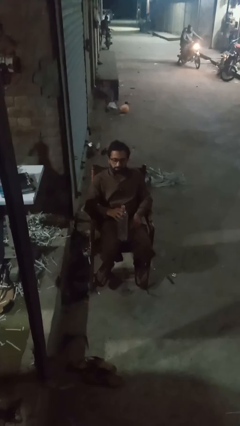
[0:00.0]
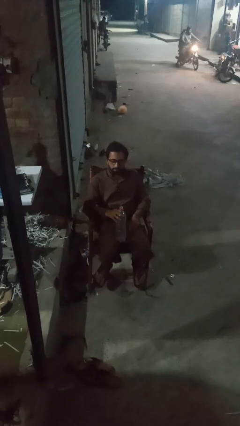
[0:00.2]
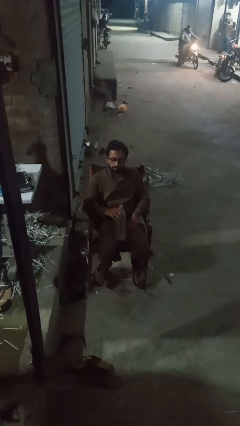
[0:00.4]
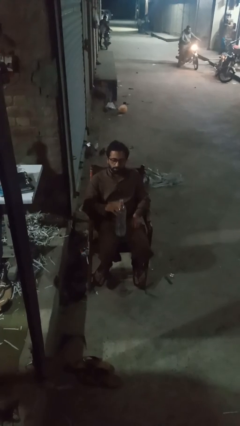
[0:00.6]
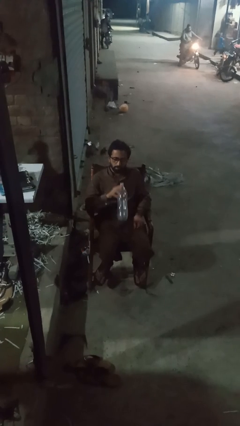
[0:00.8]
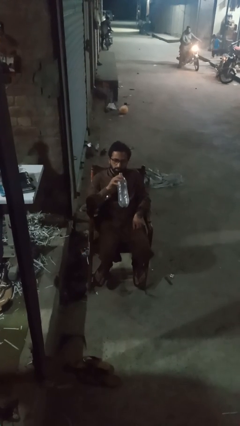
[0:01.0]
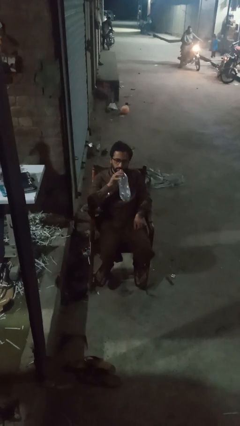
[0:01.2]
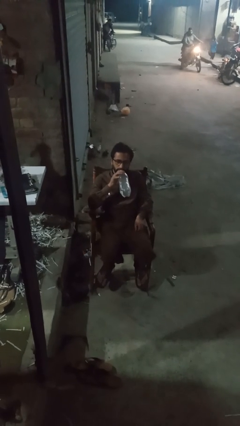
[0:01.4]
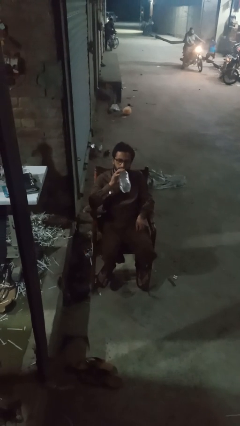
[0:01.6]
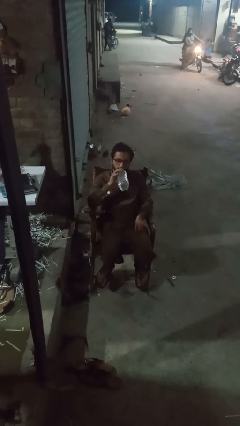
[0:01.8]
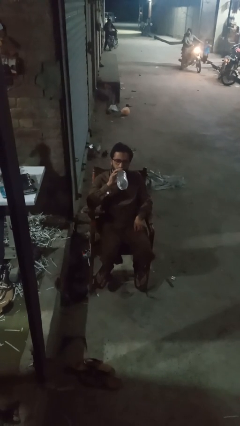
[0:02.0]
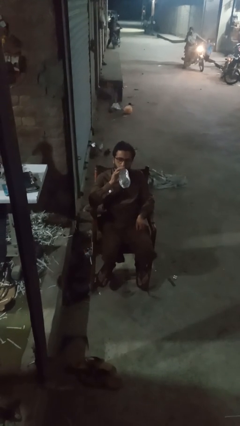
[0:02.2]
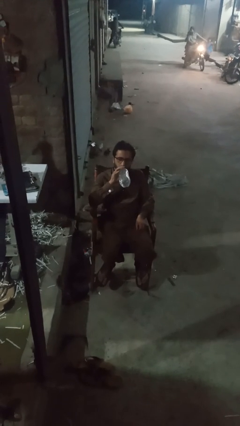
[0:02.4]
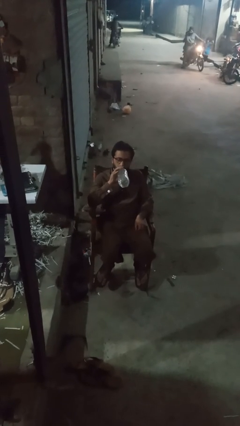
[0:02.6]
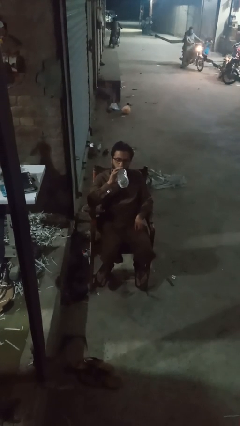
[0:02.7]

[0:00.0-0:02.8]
person drinks from bottle

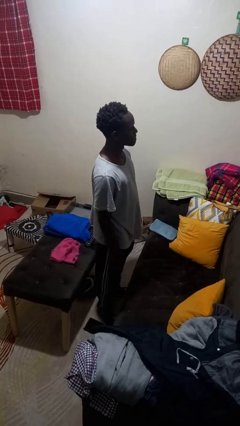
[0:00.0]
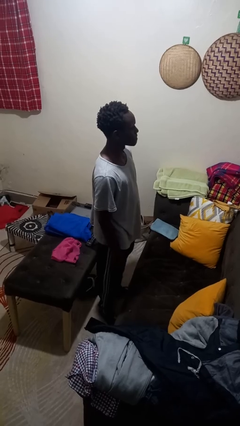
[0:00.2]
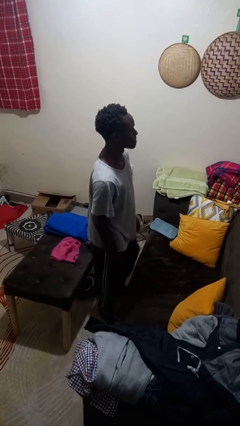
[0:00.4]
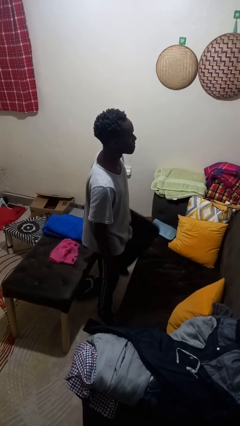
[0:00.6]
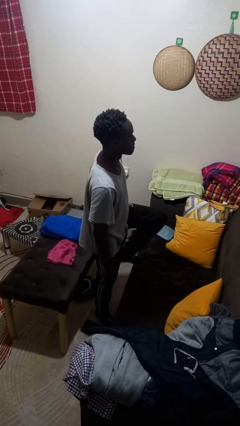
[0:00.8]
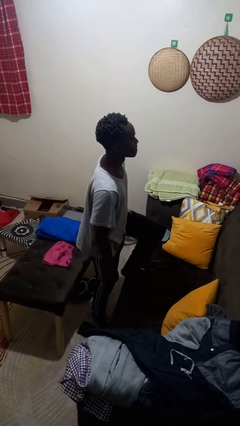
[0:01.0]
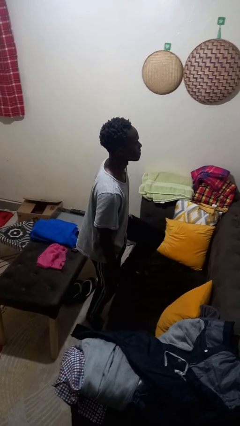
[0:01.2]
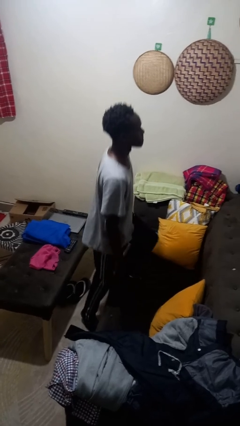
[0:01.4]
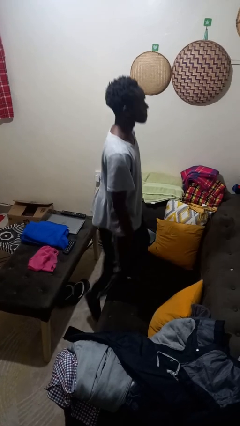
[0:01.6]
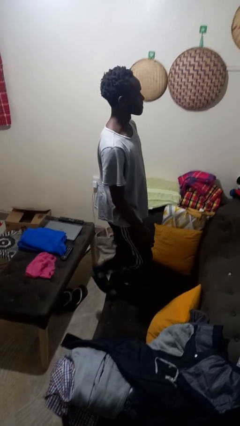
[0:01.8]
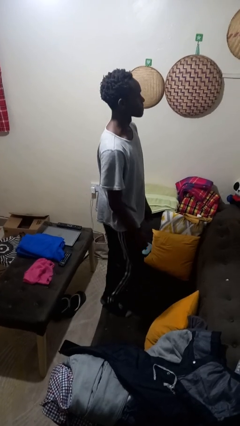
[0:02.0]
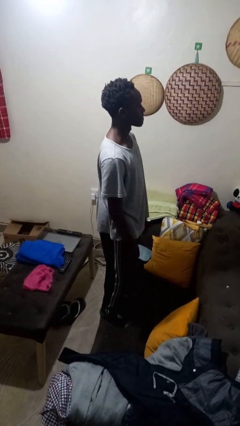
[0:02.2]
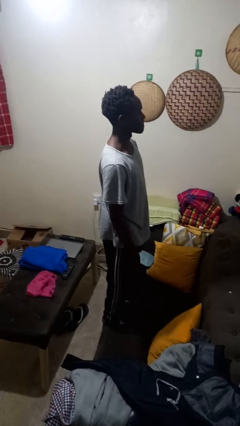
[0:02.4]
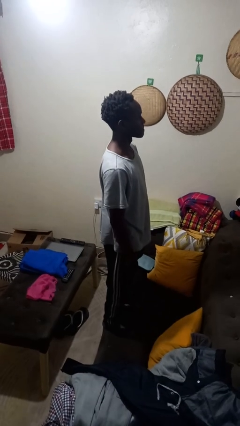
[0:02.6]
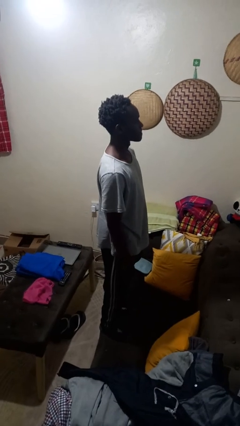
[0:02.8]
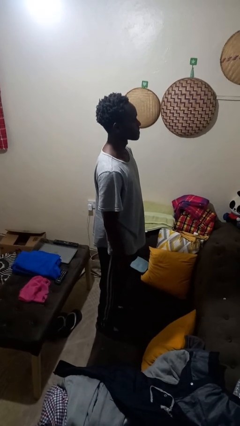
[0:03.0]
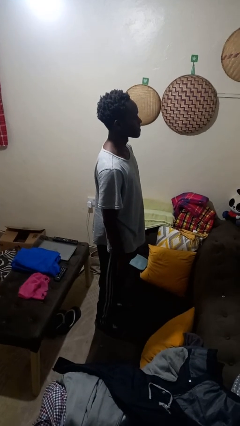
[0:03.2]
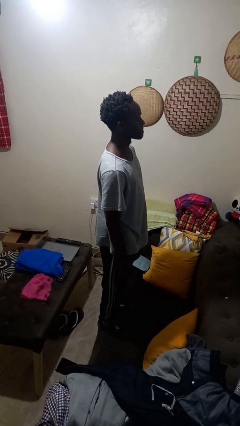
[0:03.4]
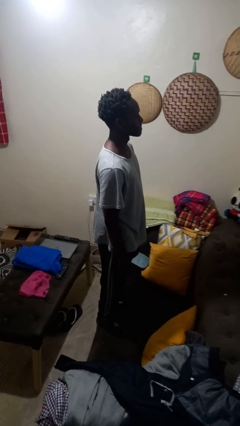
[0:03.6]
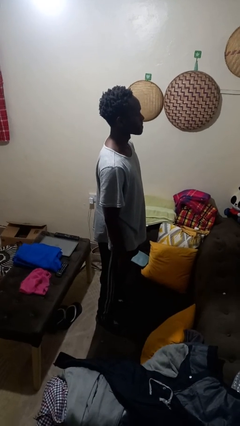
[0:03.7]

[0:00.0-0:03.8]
person climbs on couch

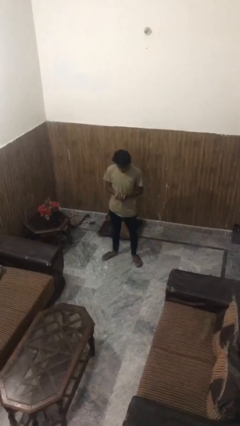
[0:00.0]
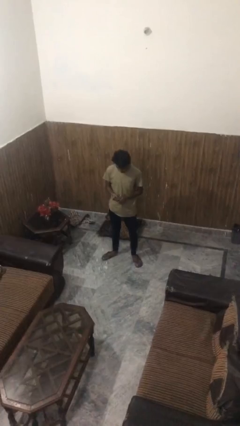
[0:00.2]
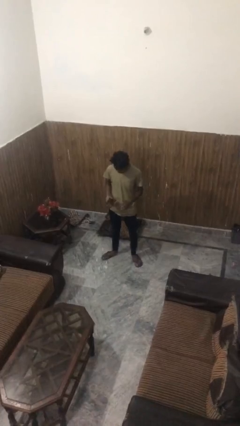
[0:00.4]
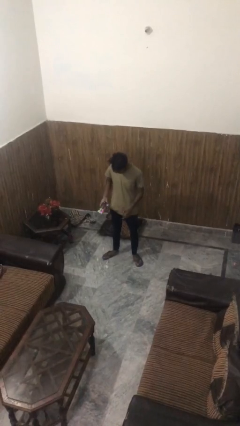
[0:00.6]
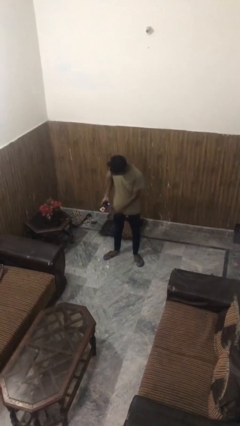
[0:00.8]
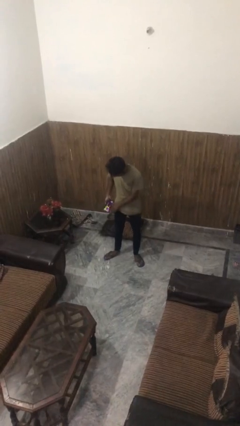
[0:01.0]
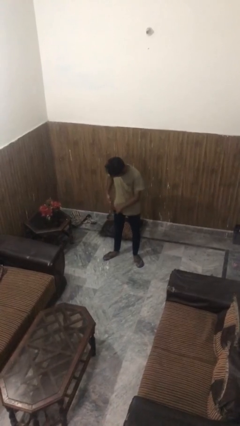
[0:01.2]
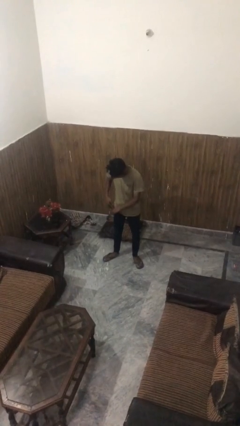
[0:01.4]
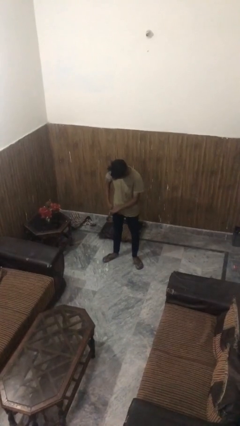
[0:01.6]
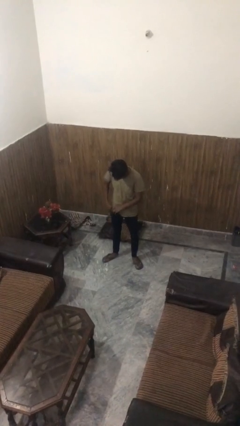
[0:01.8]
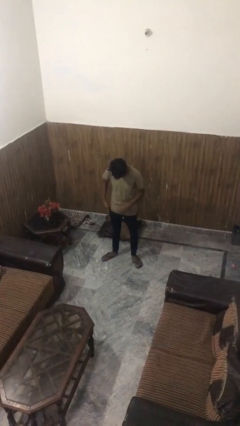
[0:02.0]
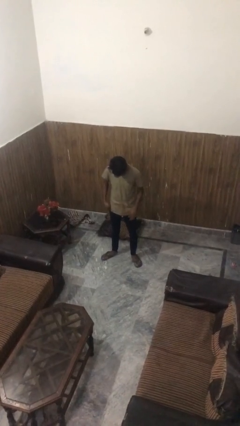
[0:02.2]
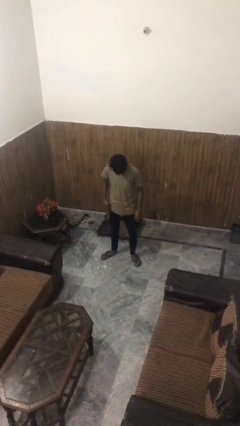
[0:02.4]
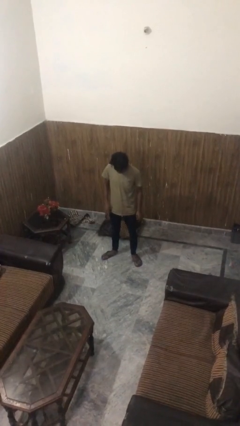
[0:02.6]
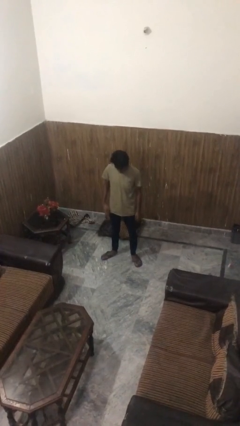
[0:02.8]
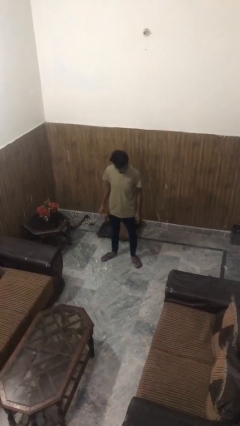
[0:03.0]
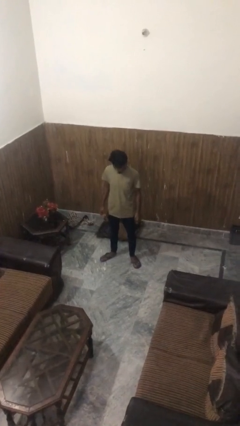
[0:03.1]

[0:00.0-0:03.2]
person puts phone into pocket

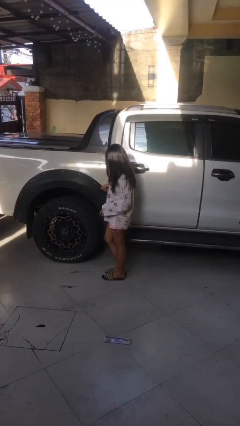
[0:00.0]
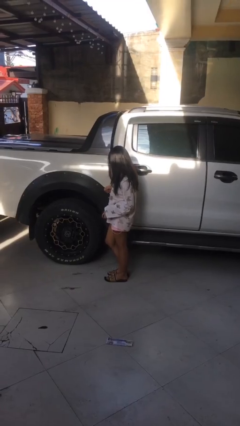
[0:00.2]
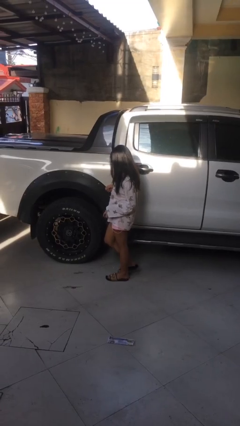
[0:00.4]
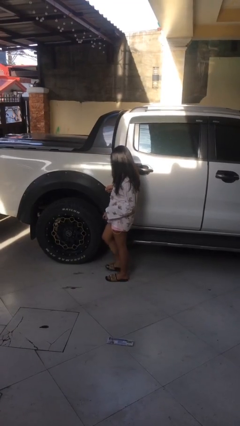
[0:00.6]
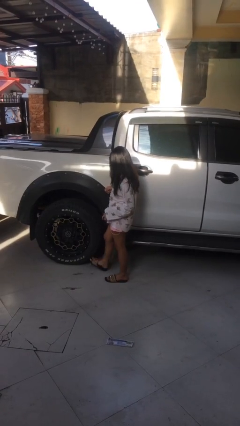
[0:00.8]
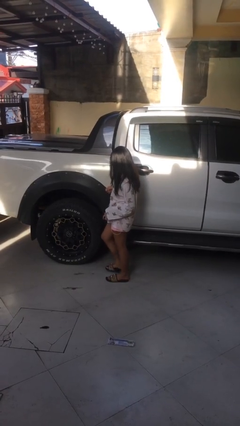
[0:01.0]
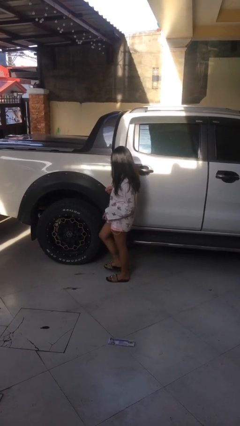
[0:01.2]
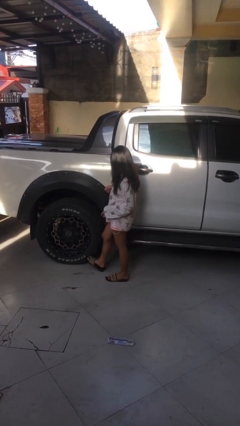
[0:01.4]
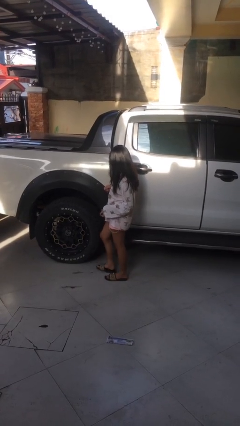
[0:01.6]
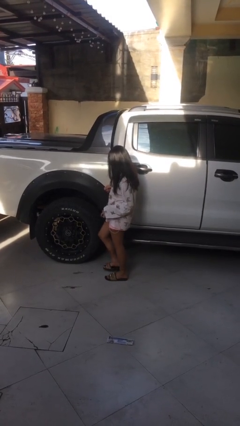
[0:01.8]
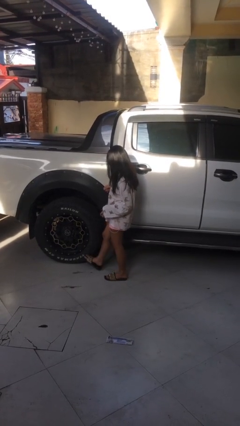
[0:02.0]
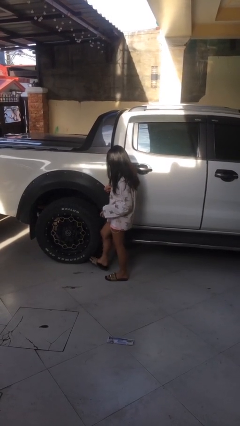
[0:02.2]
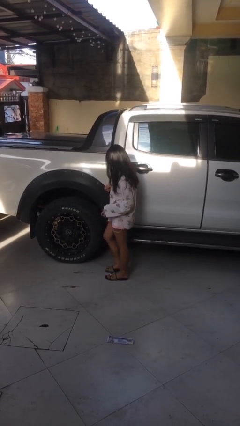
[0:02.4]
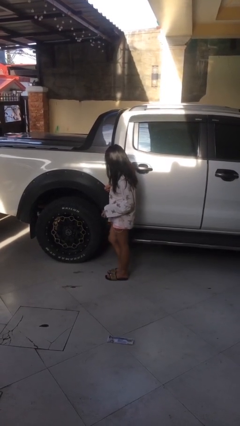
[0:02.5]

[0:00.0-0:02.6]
person kicks car tires

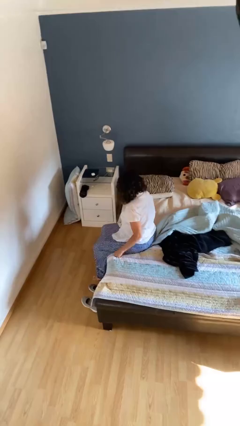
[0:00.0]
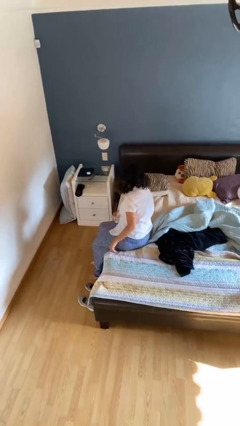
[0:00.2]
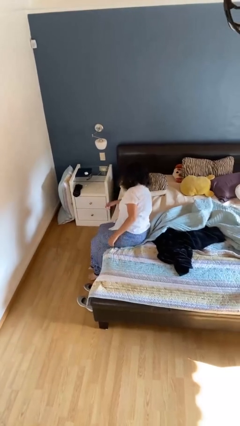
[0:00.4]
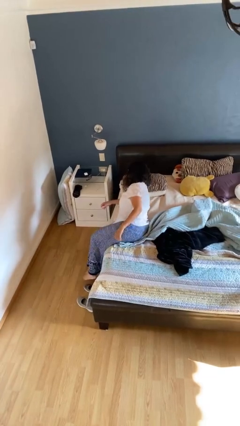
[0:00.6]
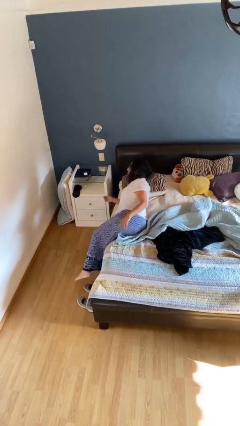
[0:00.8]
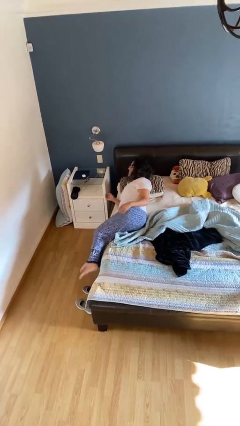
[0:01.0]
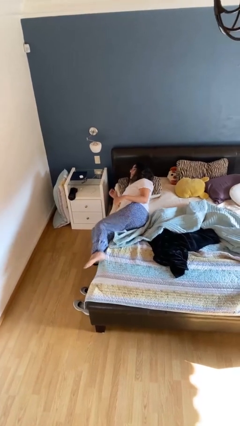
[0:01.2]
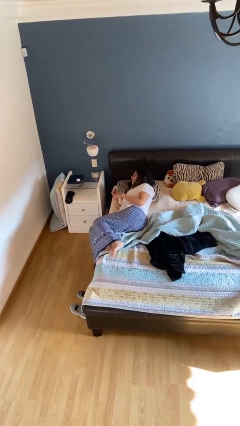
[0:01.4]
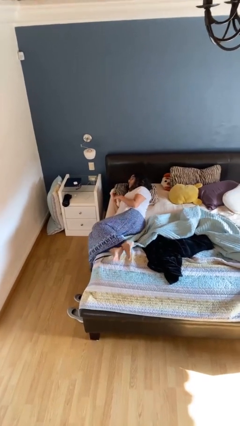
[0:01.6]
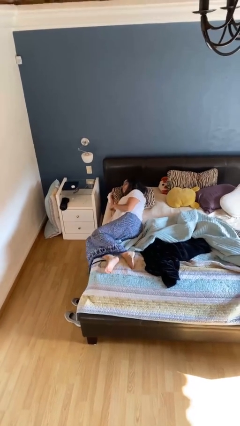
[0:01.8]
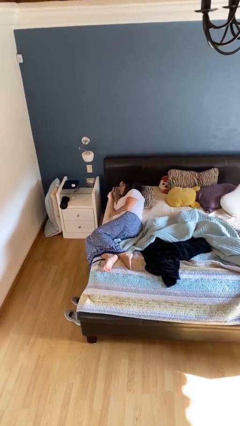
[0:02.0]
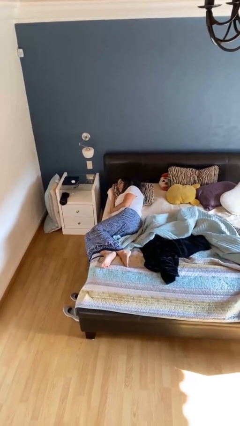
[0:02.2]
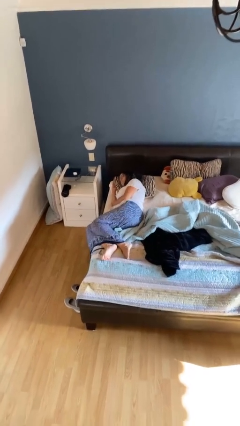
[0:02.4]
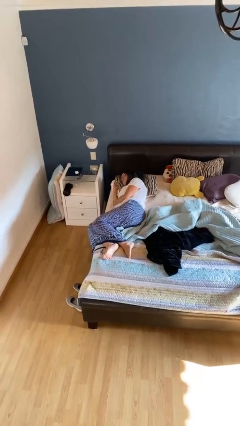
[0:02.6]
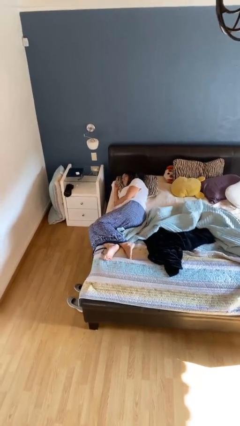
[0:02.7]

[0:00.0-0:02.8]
person lies down on bed

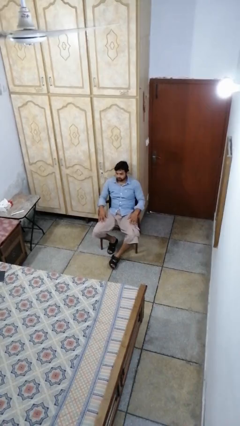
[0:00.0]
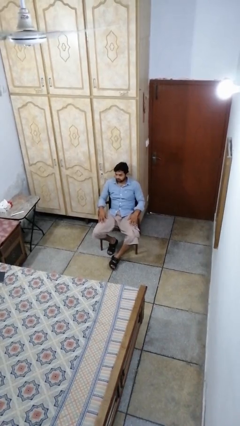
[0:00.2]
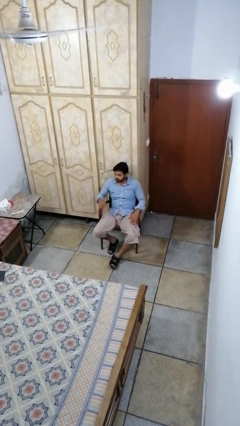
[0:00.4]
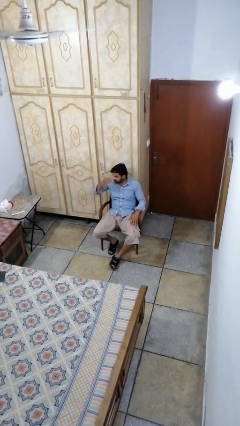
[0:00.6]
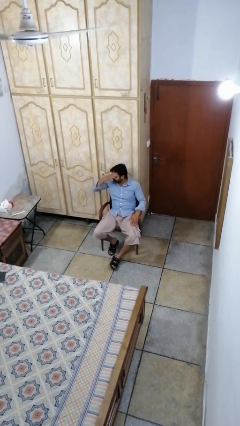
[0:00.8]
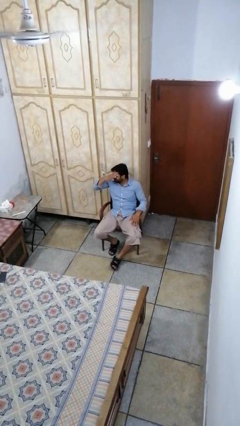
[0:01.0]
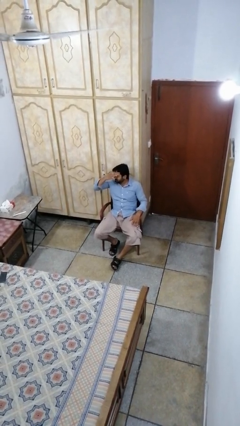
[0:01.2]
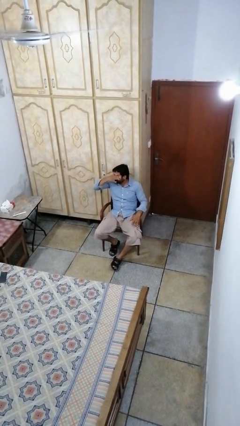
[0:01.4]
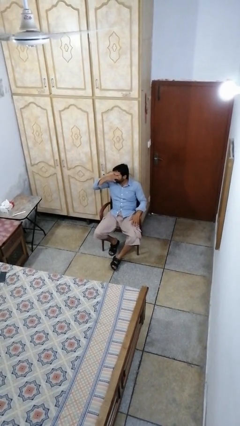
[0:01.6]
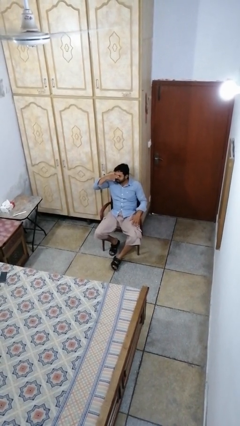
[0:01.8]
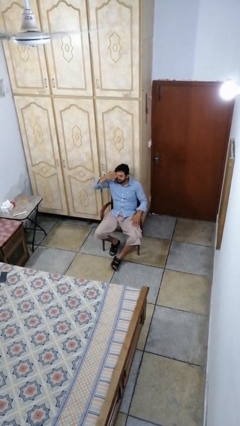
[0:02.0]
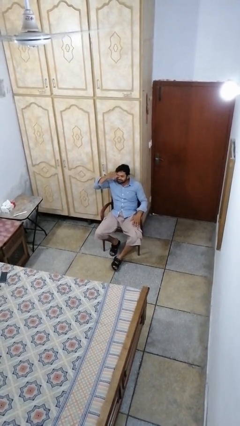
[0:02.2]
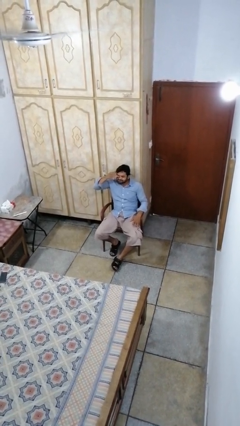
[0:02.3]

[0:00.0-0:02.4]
person rubs eyes
